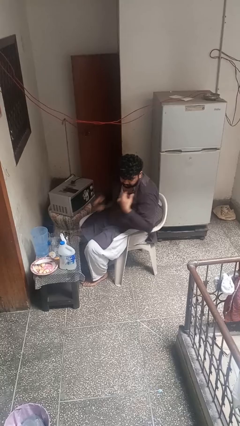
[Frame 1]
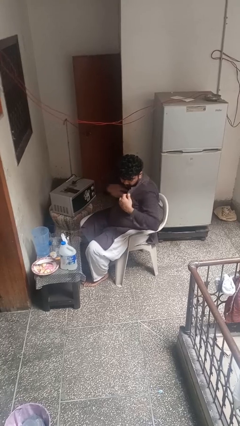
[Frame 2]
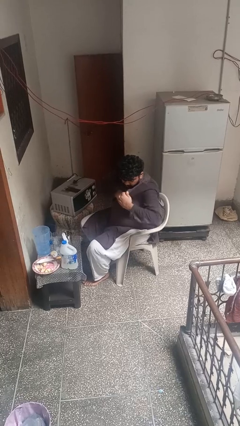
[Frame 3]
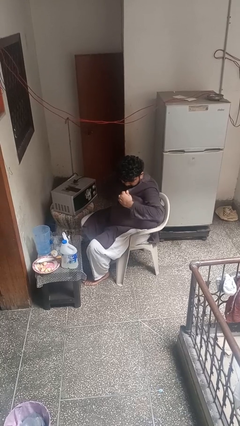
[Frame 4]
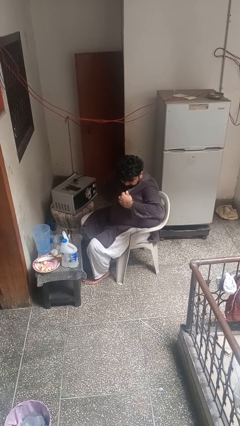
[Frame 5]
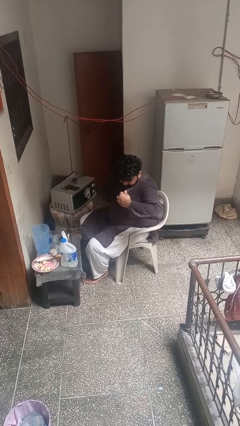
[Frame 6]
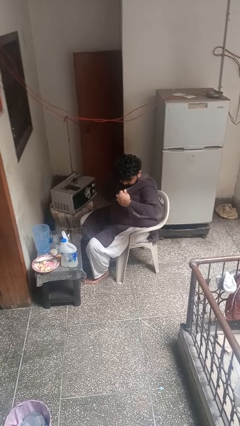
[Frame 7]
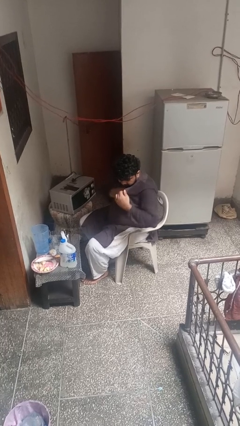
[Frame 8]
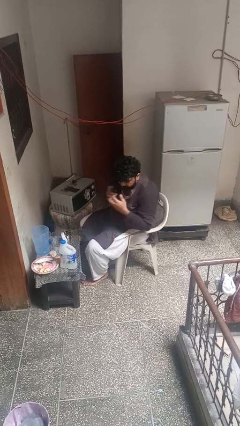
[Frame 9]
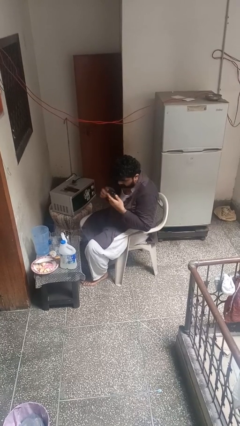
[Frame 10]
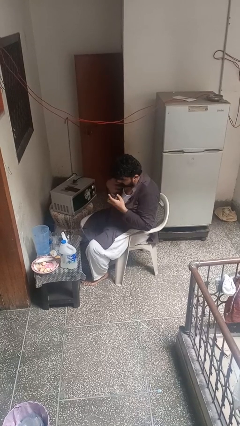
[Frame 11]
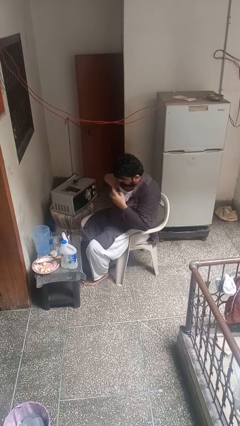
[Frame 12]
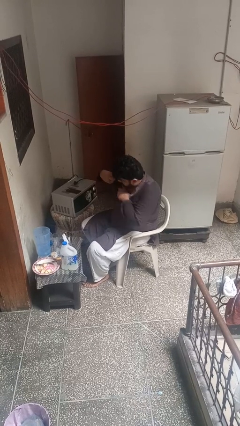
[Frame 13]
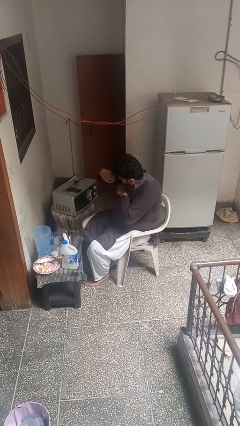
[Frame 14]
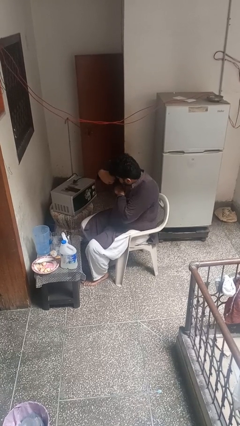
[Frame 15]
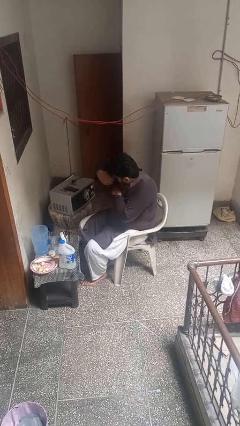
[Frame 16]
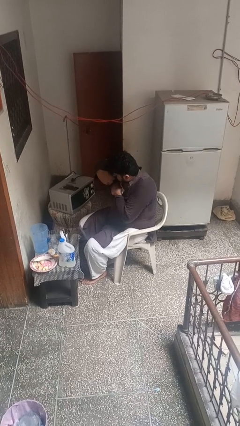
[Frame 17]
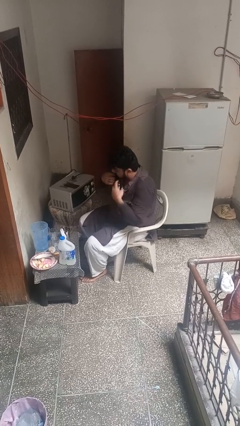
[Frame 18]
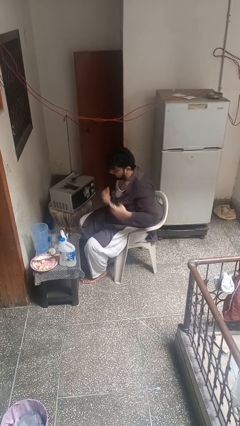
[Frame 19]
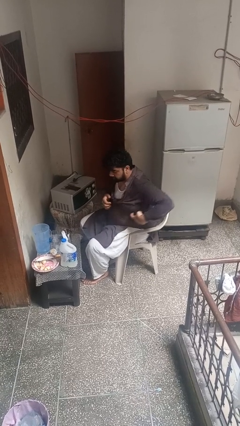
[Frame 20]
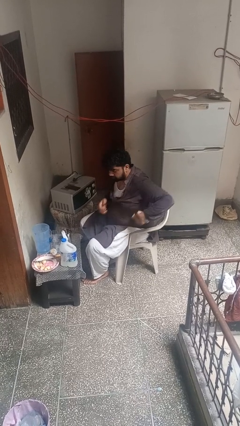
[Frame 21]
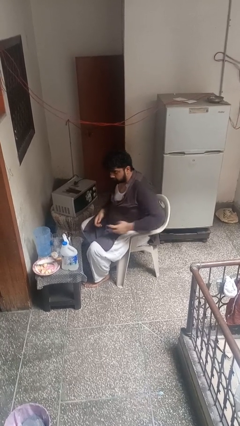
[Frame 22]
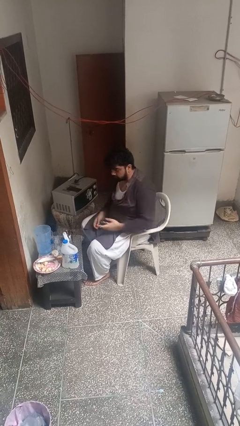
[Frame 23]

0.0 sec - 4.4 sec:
person applies deodorant

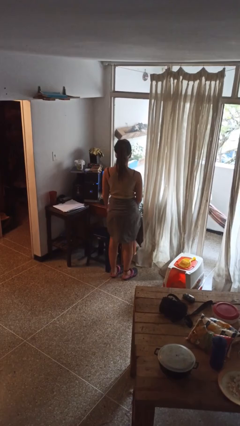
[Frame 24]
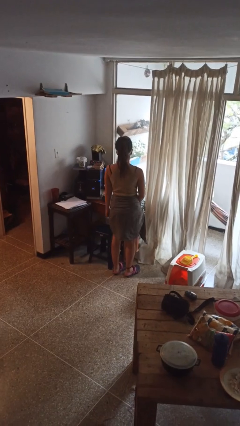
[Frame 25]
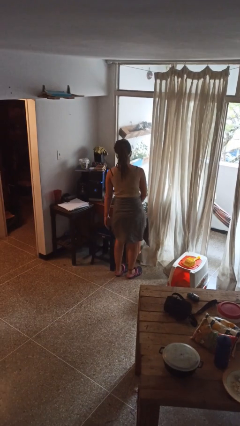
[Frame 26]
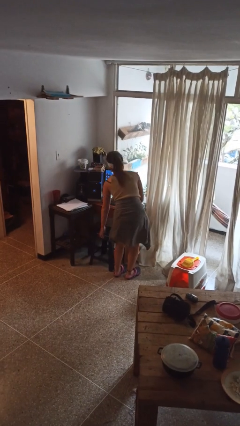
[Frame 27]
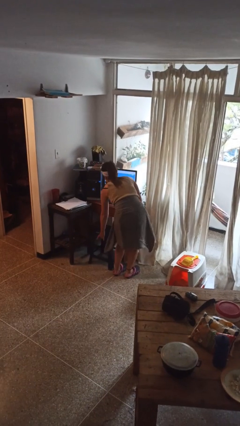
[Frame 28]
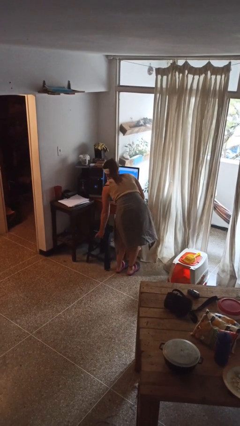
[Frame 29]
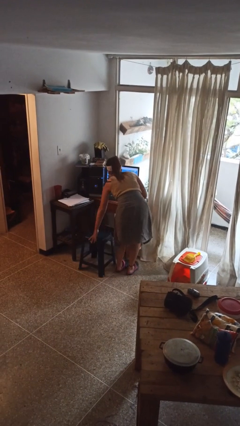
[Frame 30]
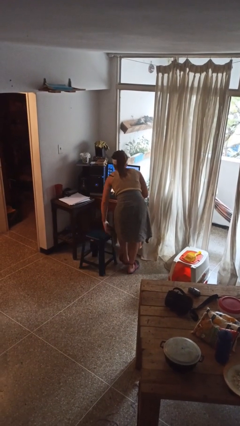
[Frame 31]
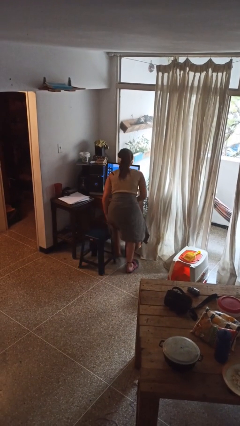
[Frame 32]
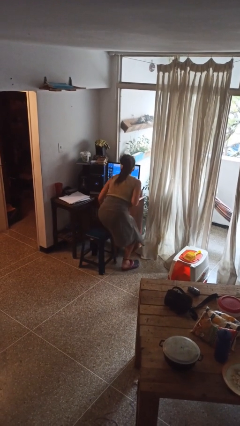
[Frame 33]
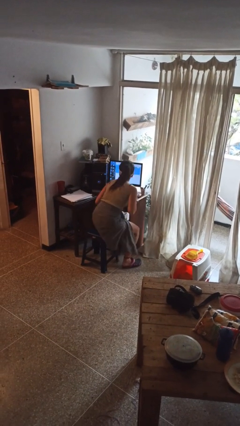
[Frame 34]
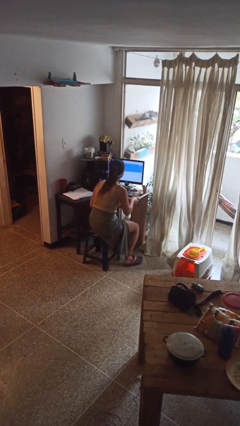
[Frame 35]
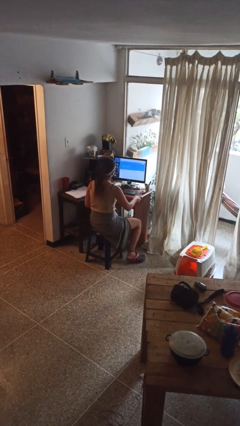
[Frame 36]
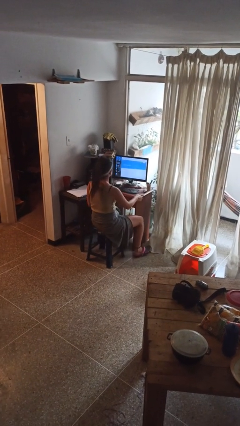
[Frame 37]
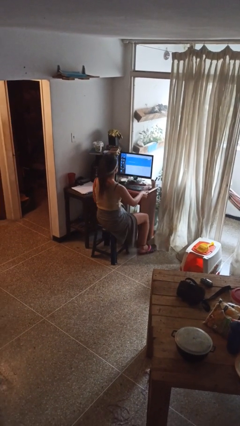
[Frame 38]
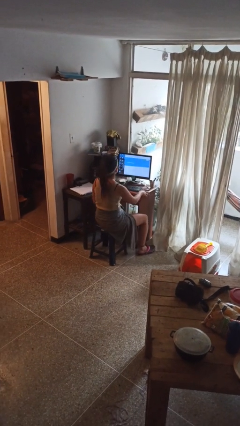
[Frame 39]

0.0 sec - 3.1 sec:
person sits down

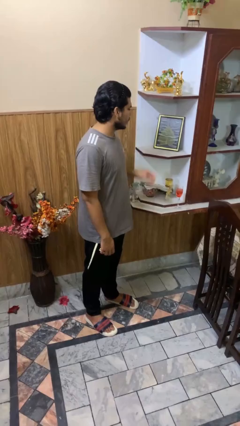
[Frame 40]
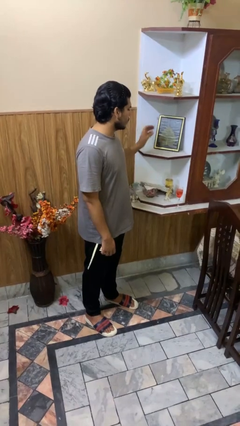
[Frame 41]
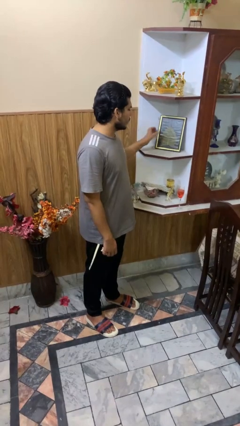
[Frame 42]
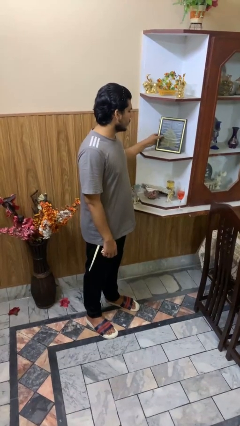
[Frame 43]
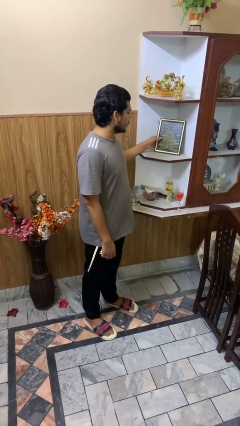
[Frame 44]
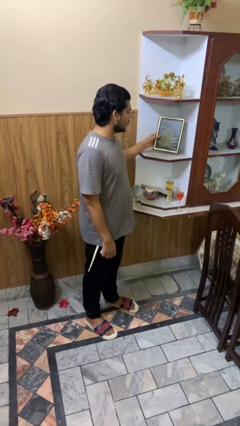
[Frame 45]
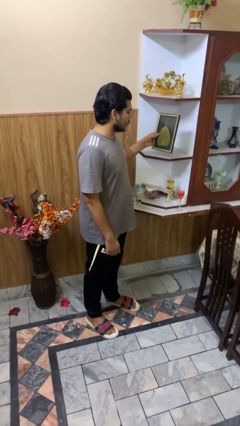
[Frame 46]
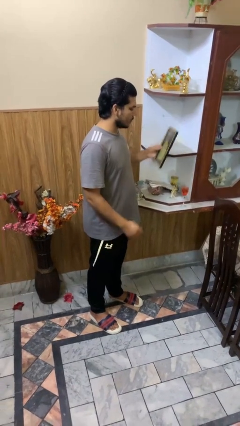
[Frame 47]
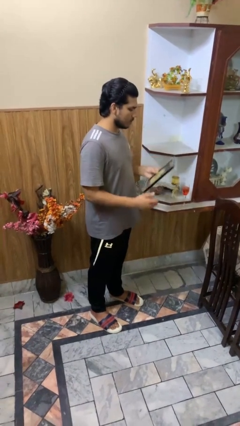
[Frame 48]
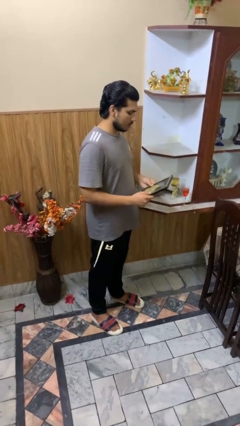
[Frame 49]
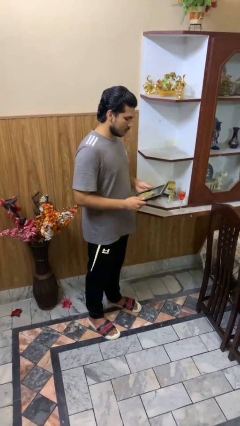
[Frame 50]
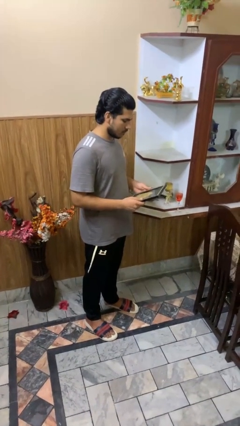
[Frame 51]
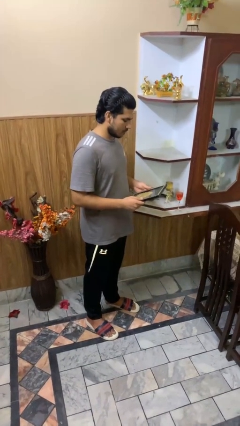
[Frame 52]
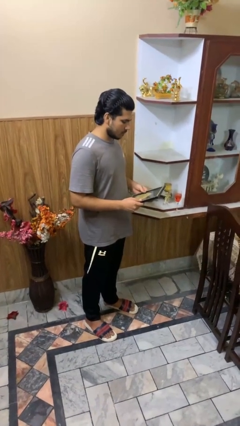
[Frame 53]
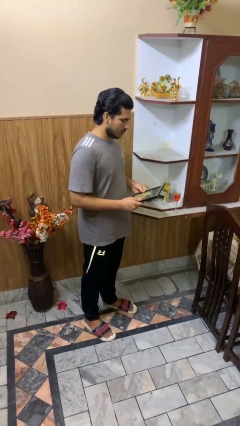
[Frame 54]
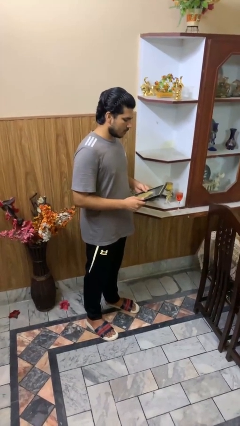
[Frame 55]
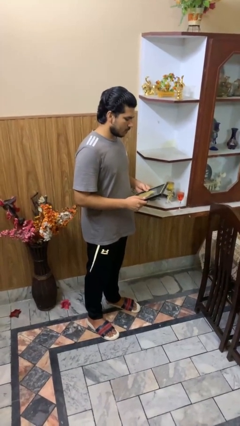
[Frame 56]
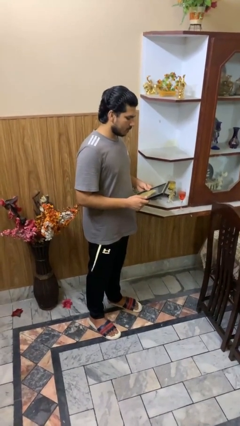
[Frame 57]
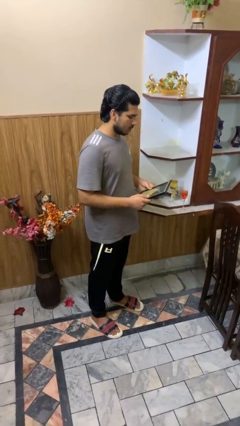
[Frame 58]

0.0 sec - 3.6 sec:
person takes down picture frame

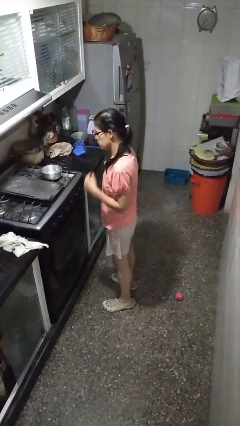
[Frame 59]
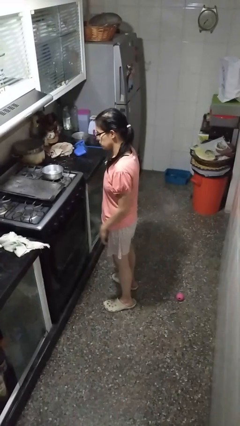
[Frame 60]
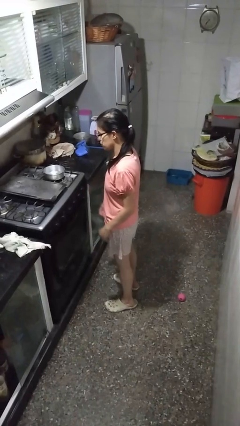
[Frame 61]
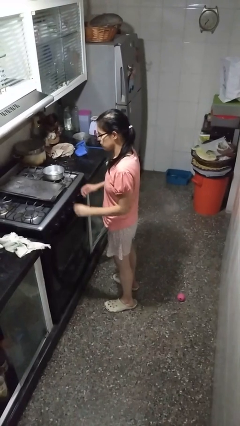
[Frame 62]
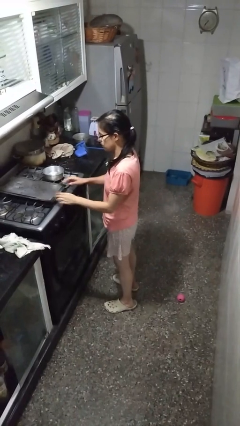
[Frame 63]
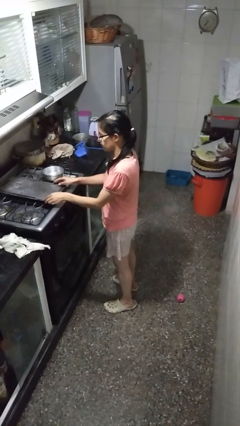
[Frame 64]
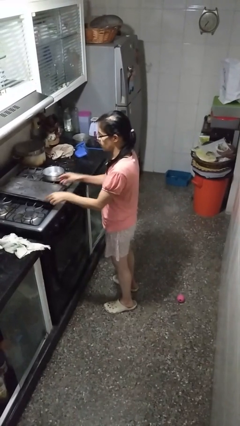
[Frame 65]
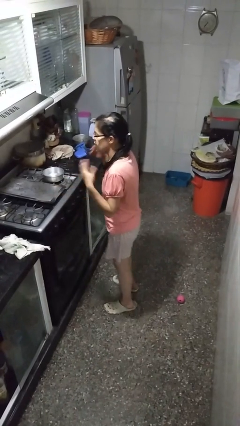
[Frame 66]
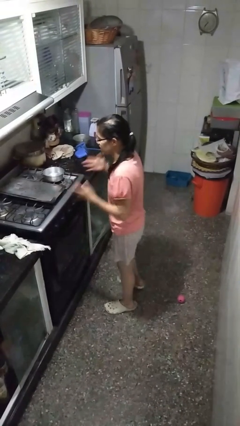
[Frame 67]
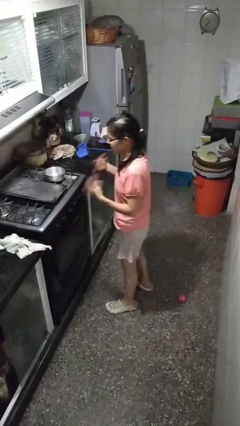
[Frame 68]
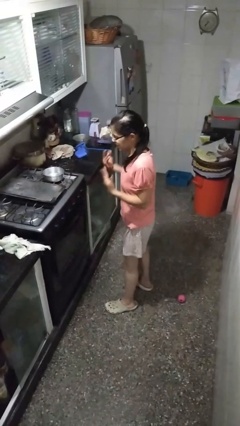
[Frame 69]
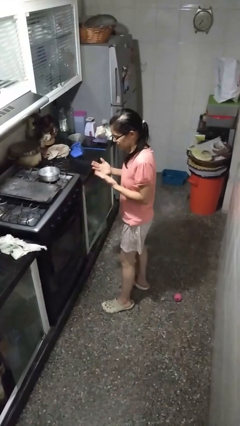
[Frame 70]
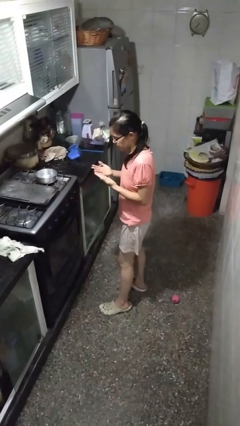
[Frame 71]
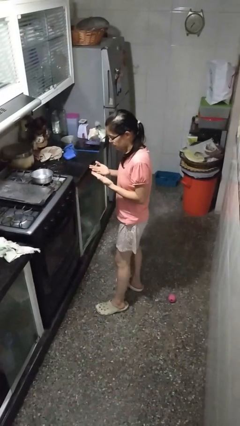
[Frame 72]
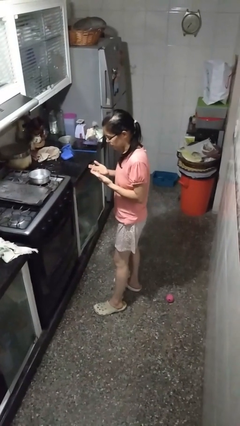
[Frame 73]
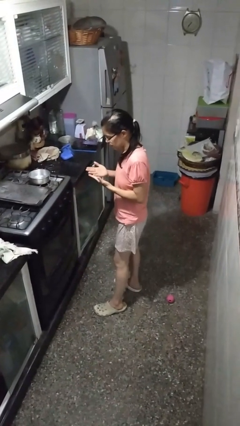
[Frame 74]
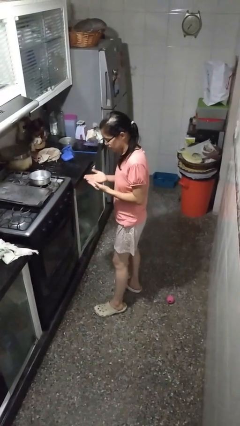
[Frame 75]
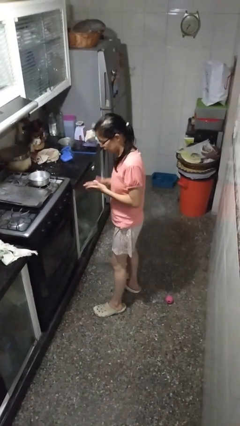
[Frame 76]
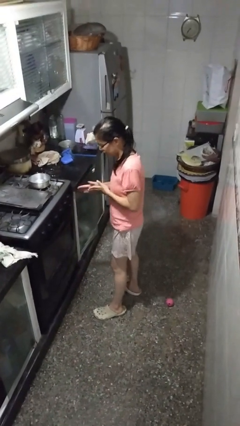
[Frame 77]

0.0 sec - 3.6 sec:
person burns hand

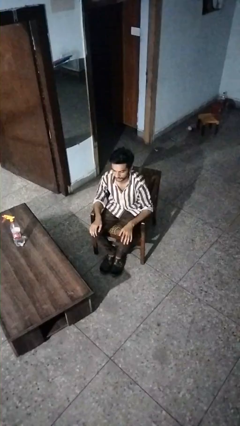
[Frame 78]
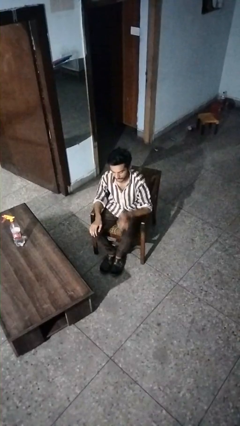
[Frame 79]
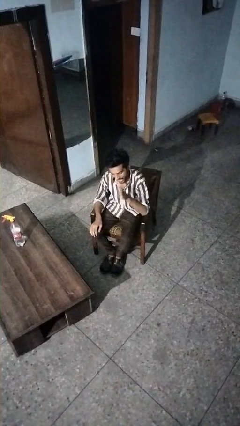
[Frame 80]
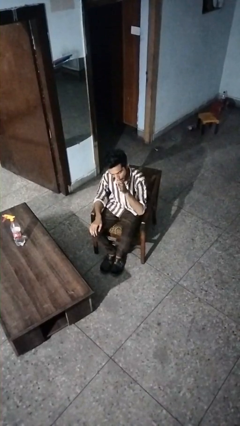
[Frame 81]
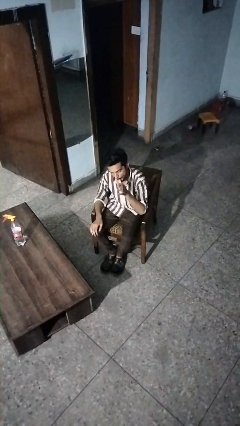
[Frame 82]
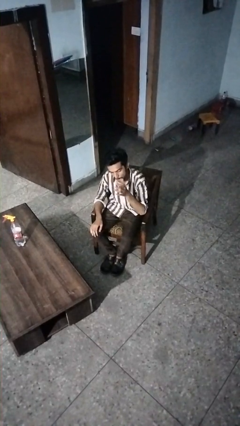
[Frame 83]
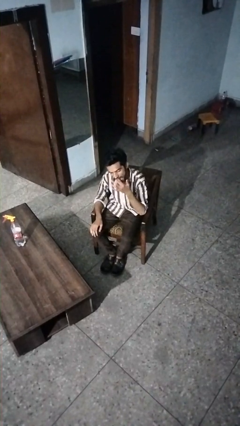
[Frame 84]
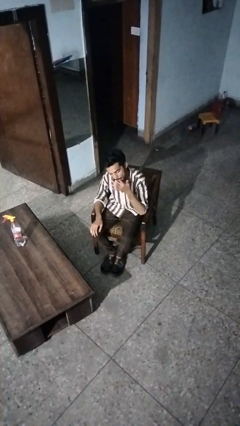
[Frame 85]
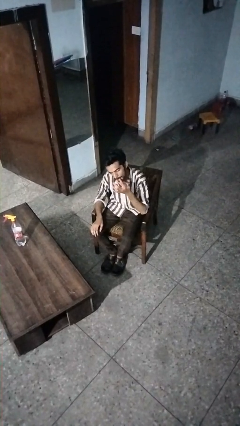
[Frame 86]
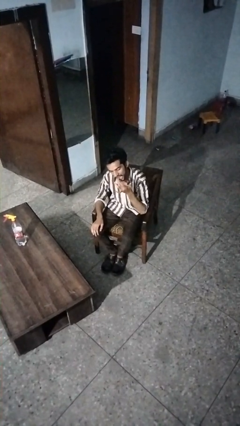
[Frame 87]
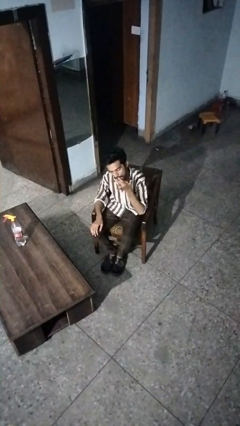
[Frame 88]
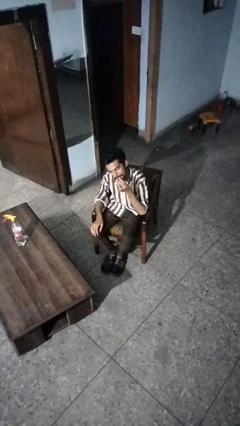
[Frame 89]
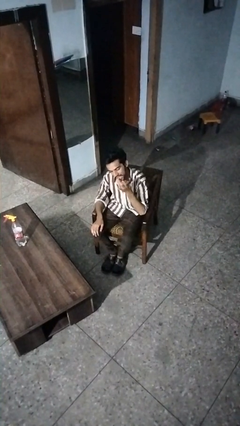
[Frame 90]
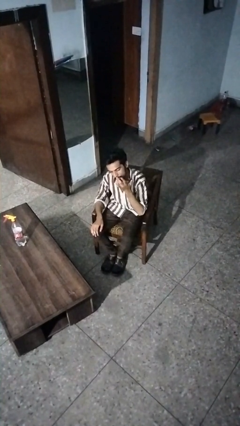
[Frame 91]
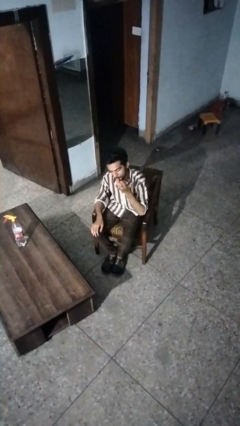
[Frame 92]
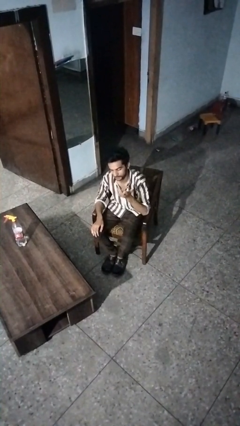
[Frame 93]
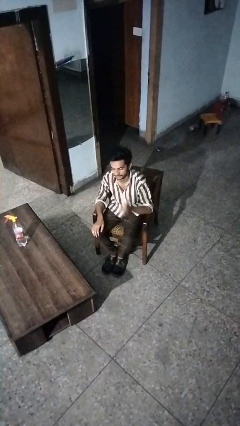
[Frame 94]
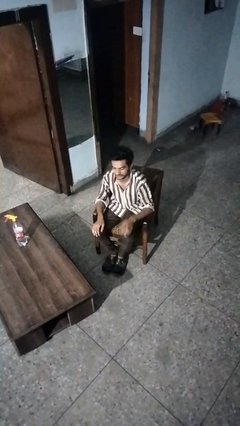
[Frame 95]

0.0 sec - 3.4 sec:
person licks fingers
